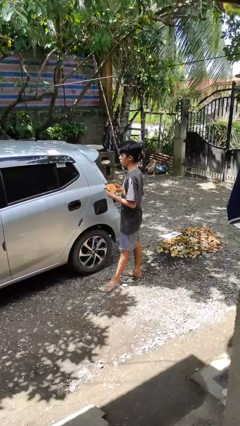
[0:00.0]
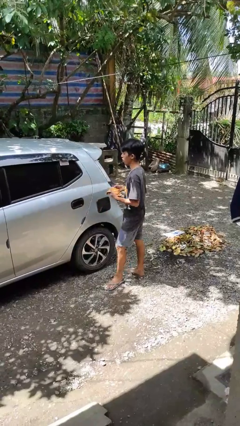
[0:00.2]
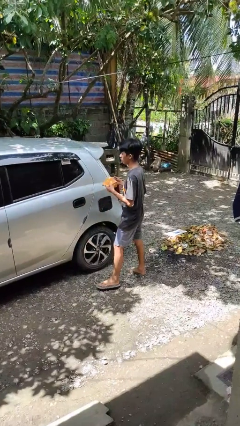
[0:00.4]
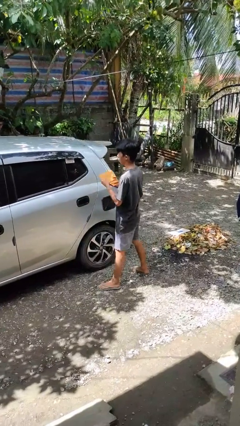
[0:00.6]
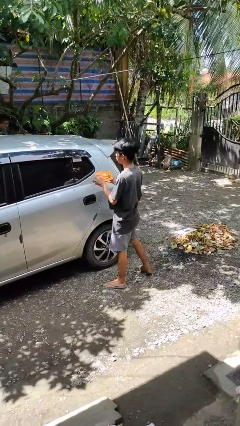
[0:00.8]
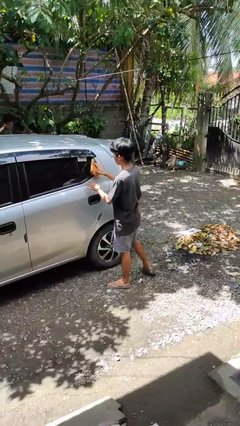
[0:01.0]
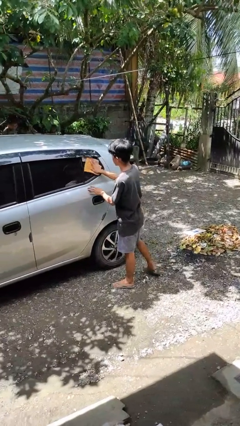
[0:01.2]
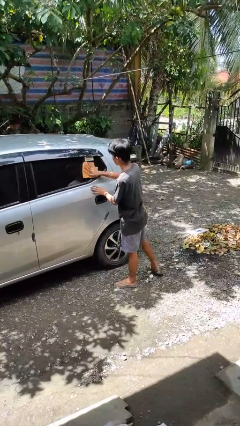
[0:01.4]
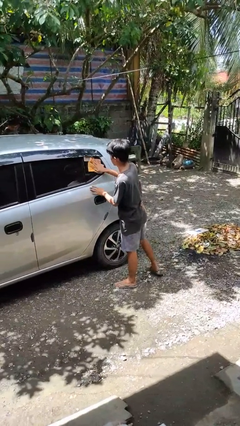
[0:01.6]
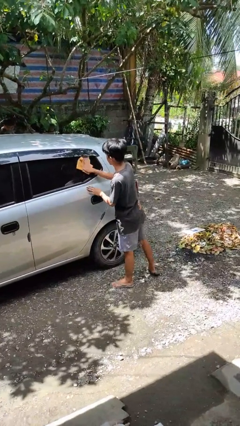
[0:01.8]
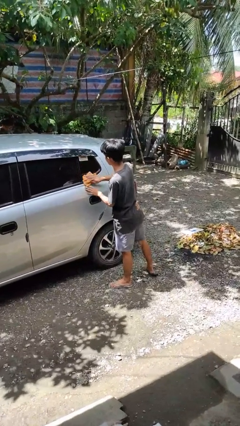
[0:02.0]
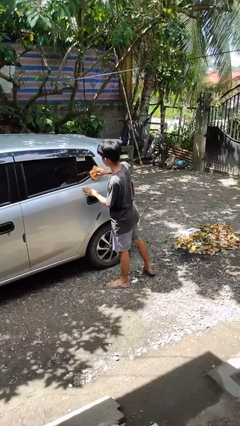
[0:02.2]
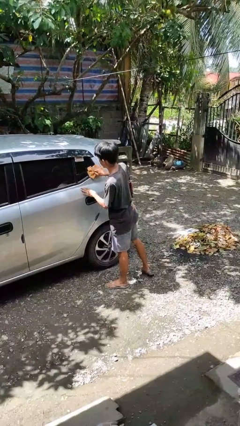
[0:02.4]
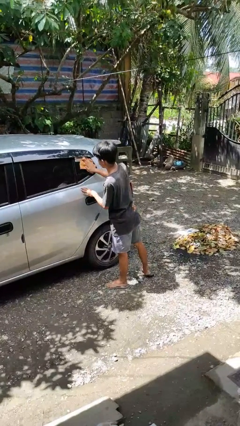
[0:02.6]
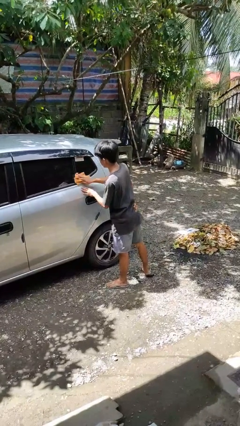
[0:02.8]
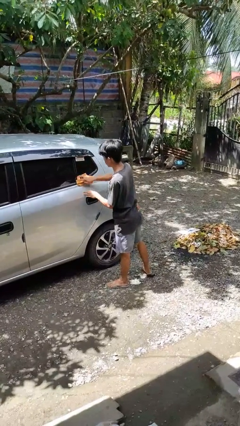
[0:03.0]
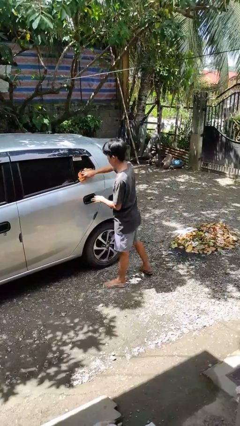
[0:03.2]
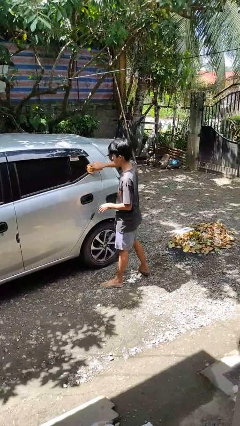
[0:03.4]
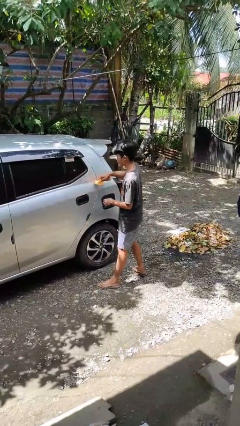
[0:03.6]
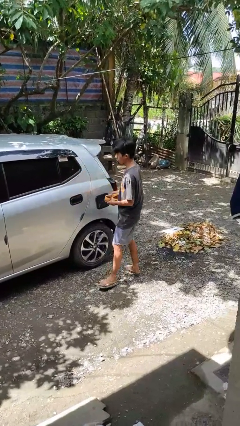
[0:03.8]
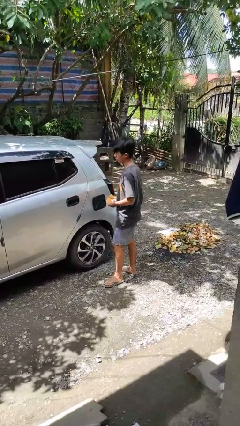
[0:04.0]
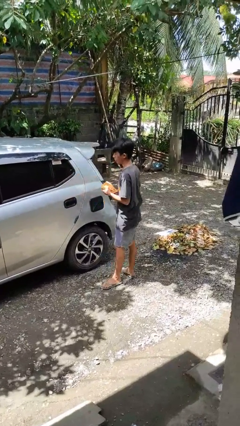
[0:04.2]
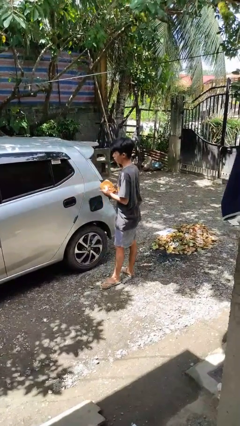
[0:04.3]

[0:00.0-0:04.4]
person polishes car with rag

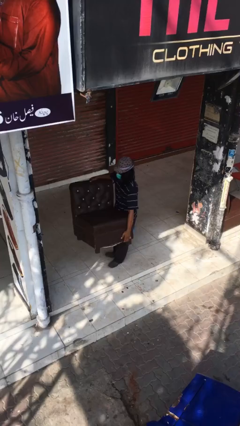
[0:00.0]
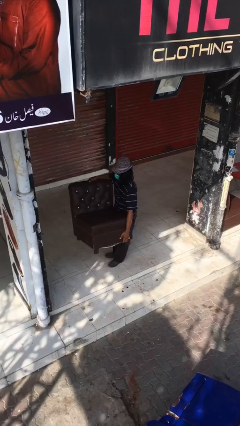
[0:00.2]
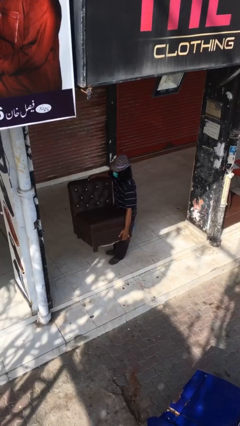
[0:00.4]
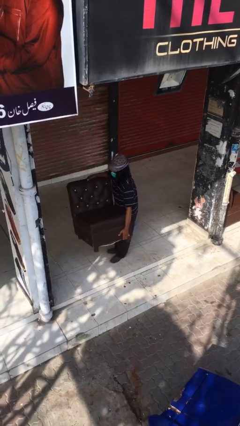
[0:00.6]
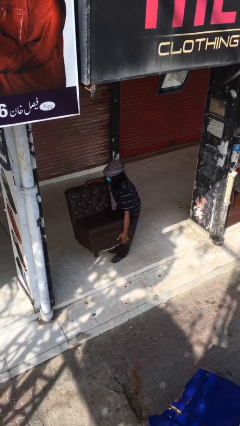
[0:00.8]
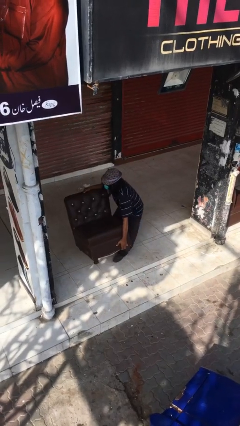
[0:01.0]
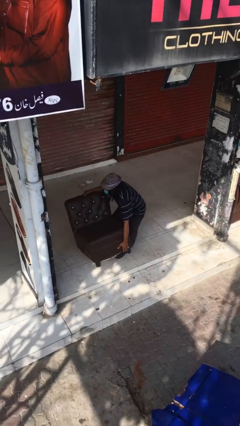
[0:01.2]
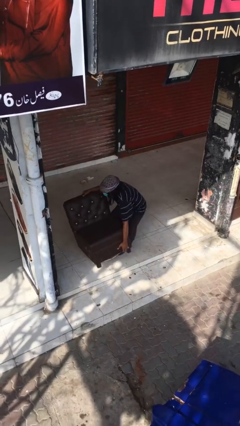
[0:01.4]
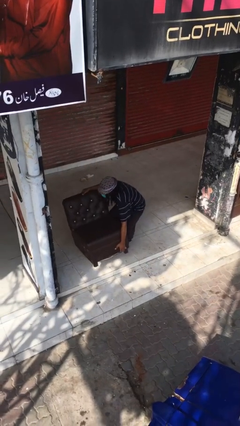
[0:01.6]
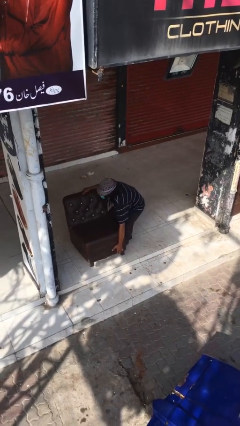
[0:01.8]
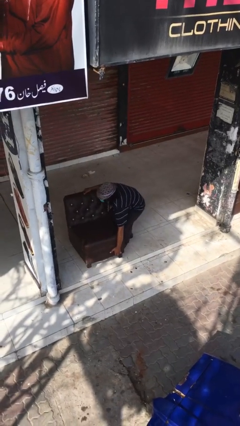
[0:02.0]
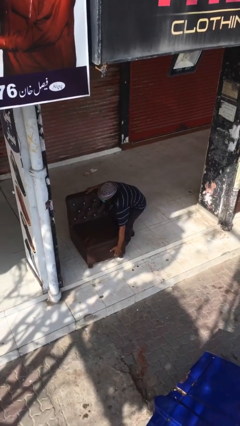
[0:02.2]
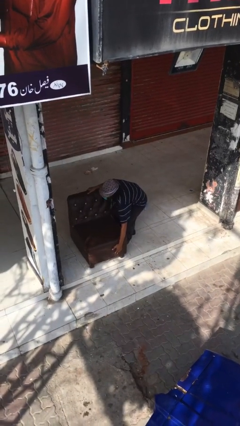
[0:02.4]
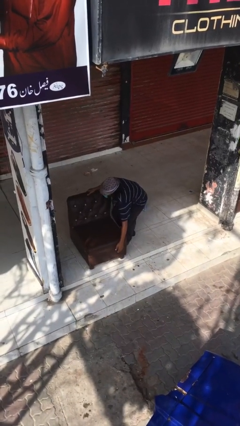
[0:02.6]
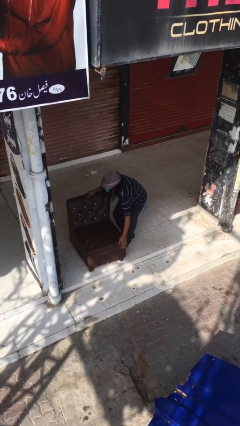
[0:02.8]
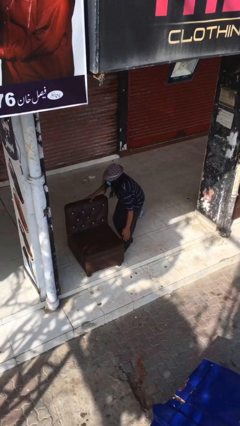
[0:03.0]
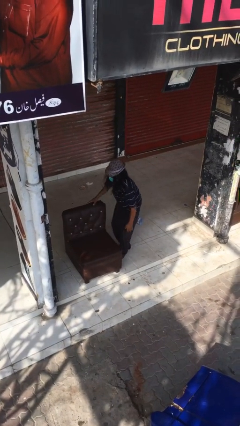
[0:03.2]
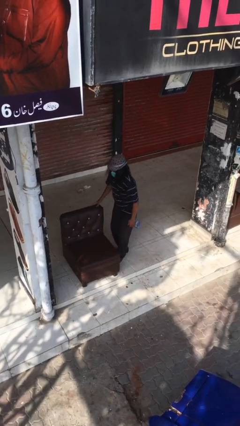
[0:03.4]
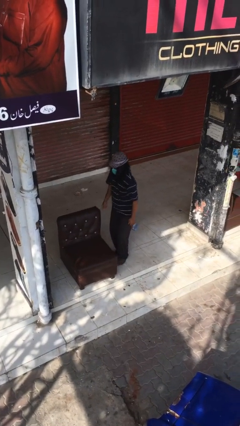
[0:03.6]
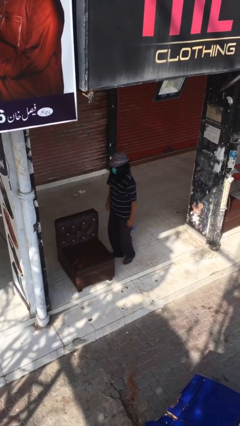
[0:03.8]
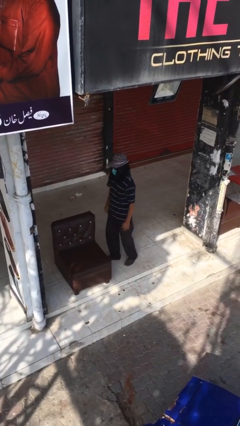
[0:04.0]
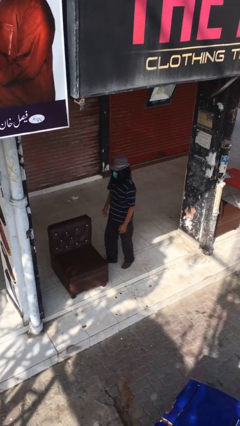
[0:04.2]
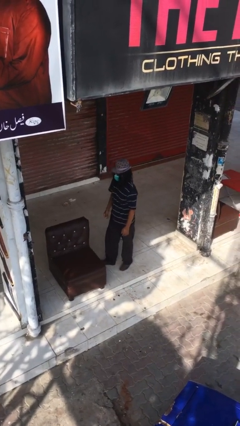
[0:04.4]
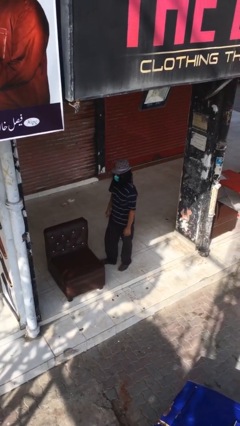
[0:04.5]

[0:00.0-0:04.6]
person puts down object on floor

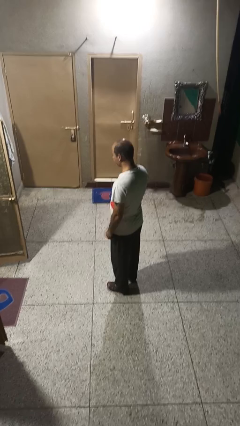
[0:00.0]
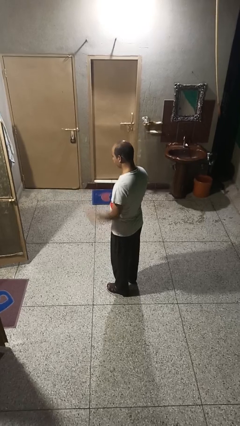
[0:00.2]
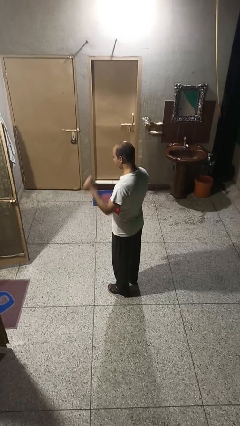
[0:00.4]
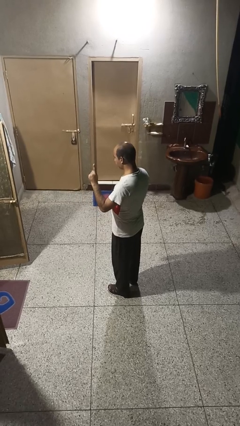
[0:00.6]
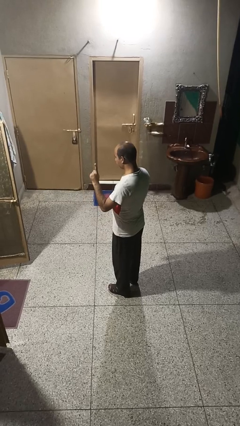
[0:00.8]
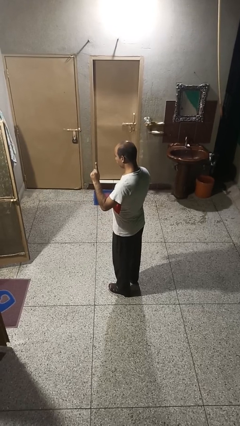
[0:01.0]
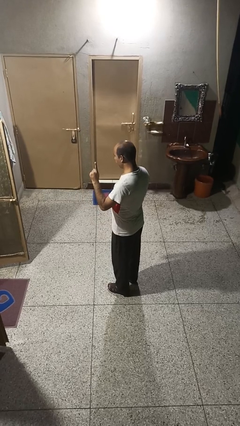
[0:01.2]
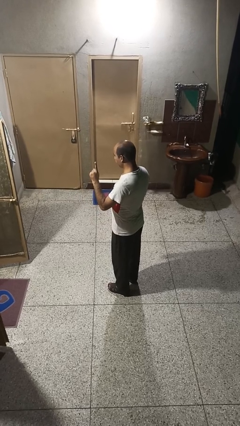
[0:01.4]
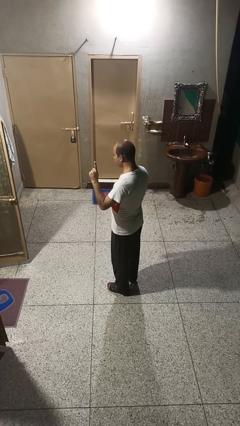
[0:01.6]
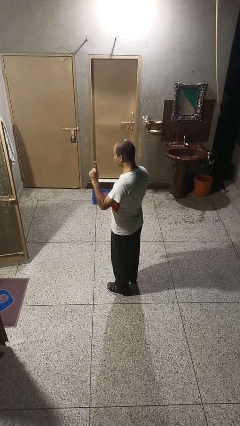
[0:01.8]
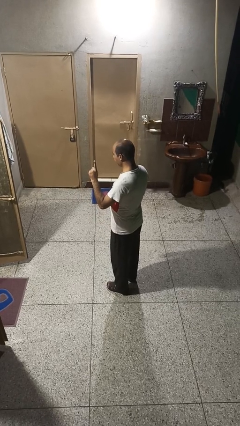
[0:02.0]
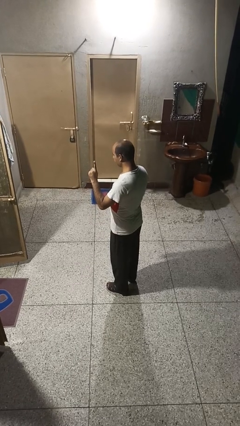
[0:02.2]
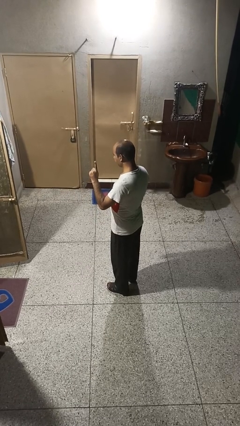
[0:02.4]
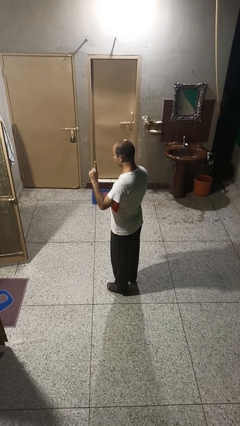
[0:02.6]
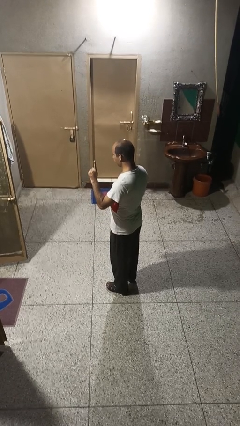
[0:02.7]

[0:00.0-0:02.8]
person gestures number one

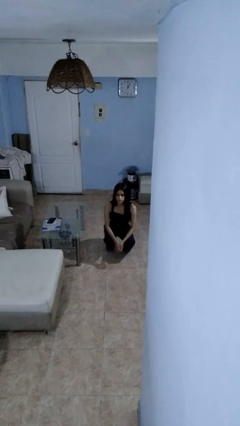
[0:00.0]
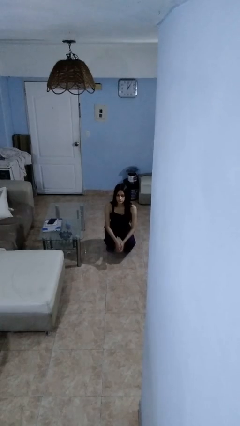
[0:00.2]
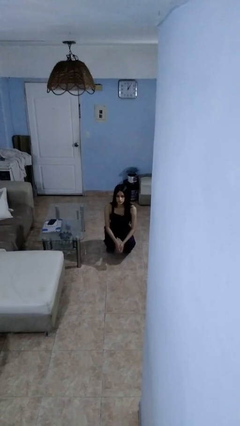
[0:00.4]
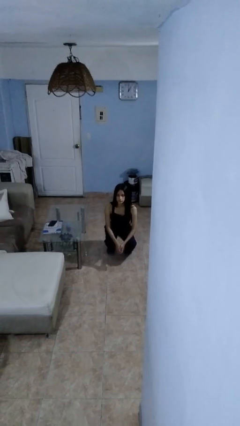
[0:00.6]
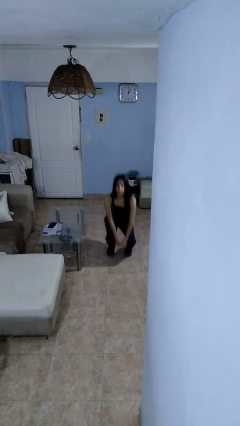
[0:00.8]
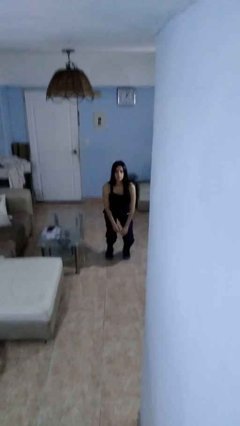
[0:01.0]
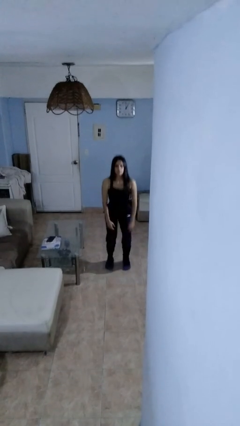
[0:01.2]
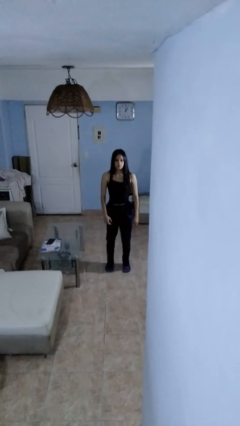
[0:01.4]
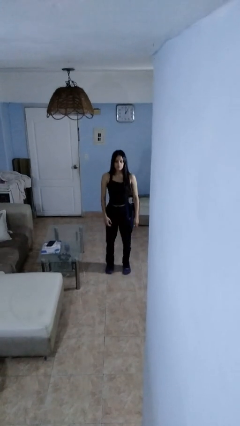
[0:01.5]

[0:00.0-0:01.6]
person stands up

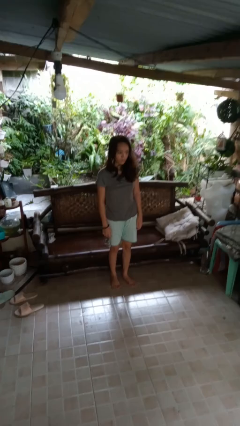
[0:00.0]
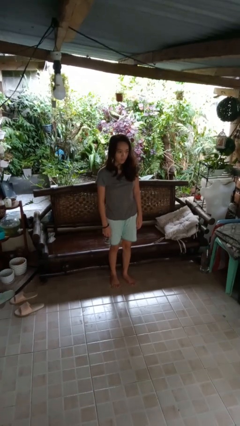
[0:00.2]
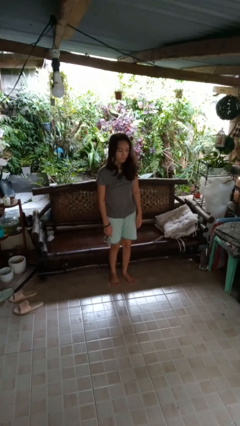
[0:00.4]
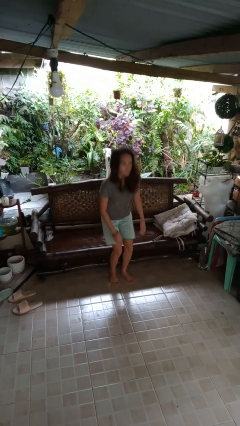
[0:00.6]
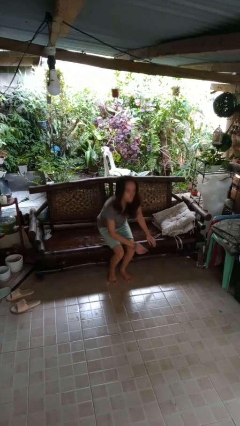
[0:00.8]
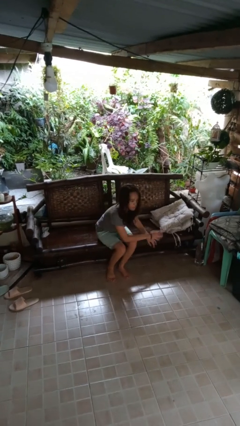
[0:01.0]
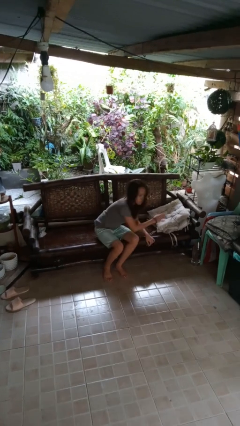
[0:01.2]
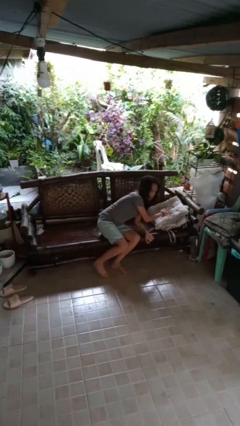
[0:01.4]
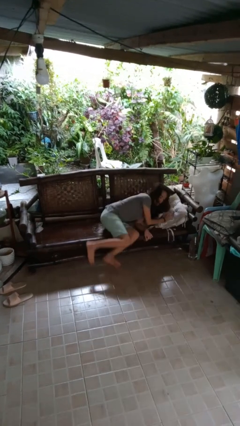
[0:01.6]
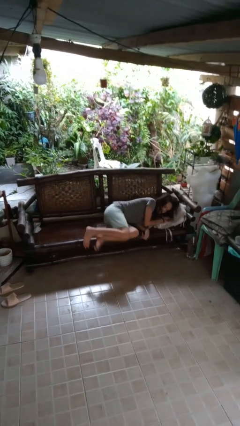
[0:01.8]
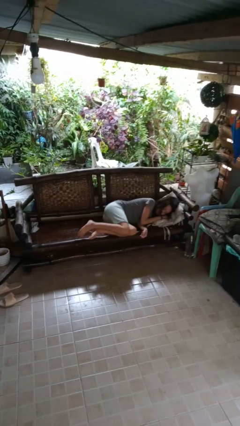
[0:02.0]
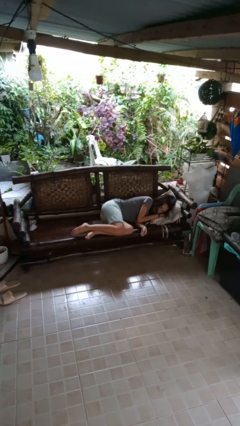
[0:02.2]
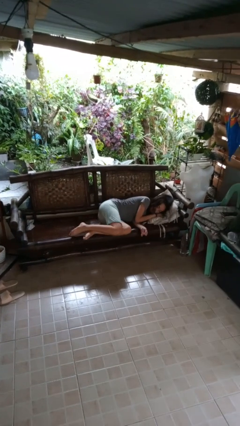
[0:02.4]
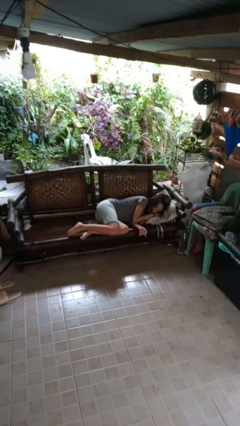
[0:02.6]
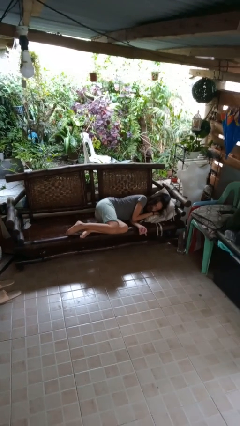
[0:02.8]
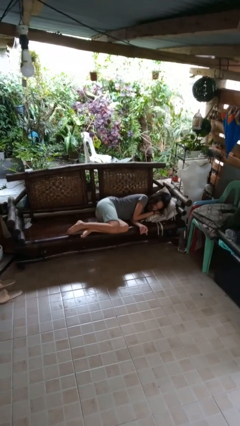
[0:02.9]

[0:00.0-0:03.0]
person lies down on couch

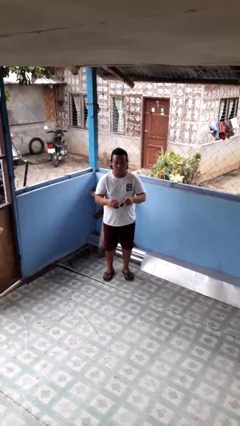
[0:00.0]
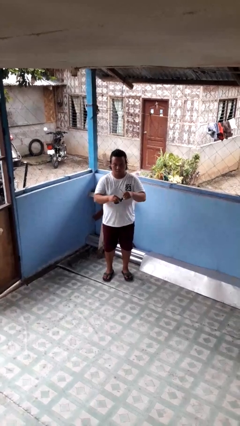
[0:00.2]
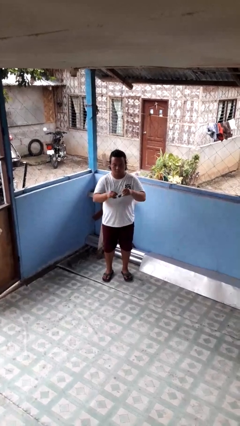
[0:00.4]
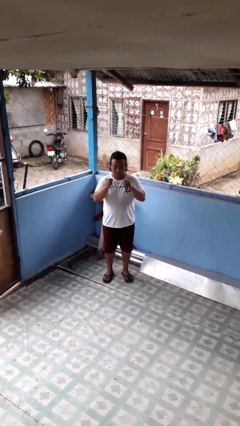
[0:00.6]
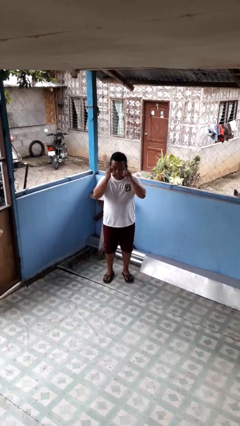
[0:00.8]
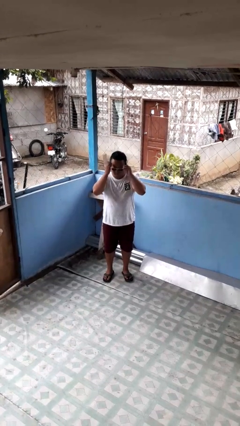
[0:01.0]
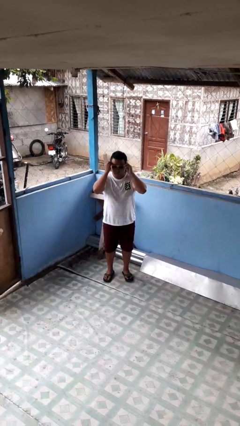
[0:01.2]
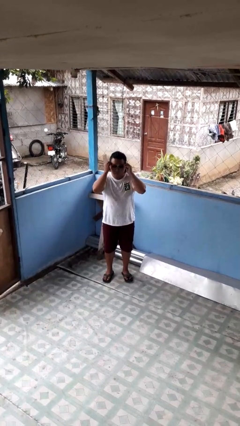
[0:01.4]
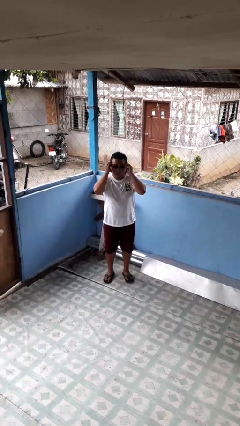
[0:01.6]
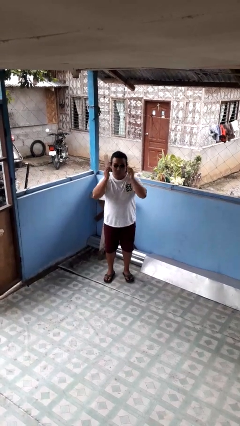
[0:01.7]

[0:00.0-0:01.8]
person puts on sunglasses
